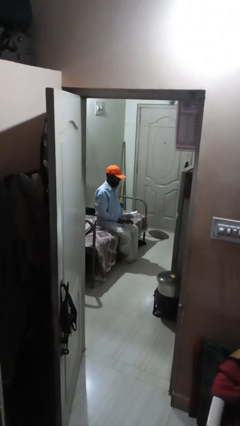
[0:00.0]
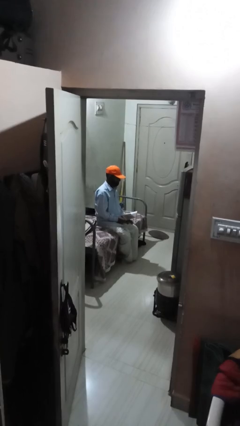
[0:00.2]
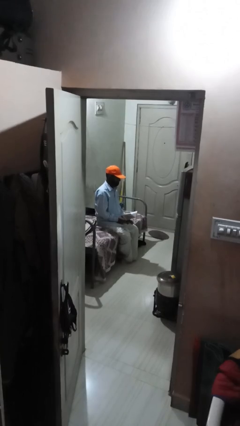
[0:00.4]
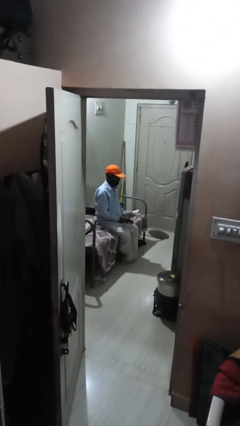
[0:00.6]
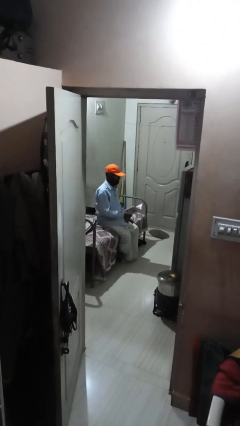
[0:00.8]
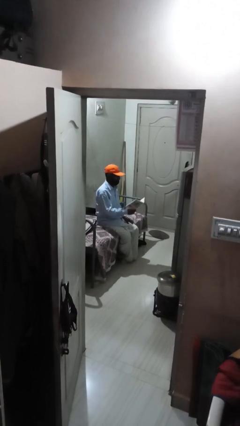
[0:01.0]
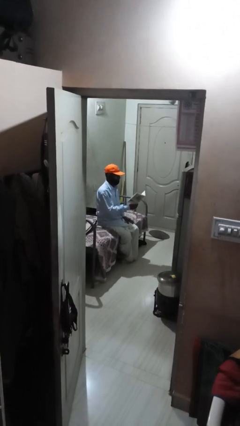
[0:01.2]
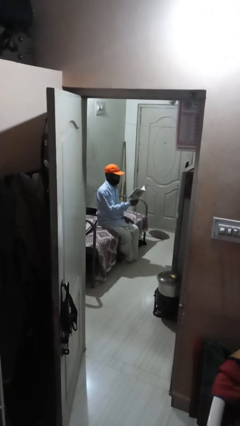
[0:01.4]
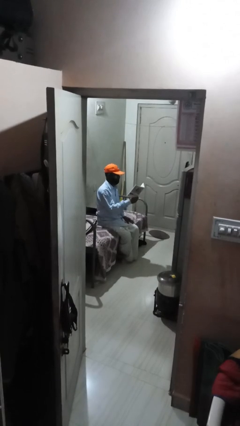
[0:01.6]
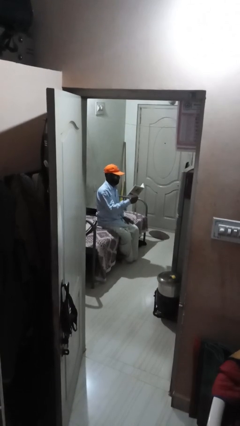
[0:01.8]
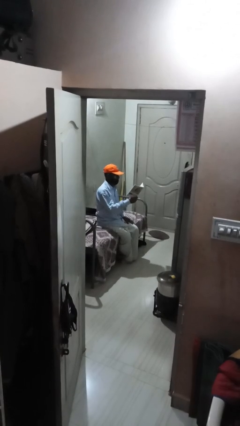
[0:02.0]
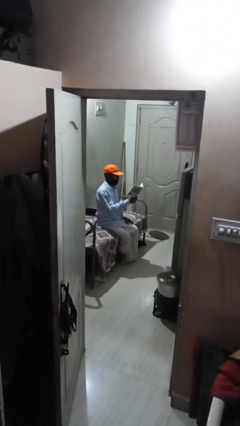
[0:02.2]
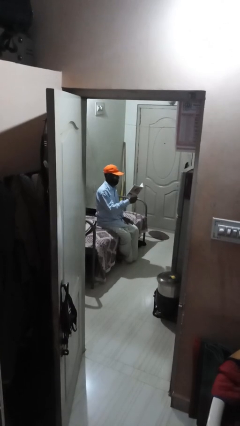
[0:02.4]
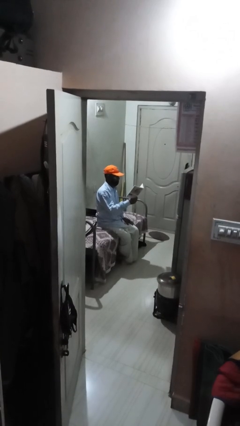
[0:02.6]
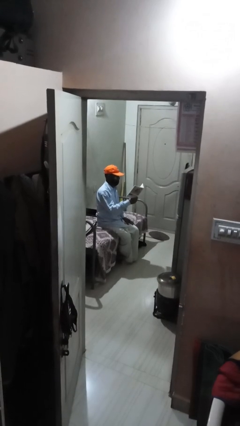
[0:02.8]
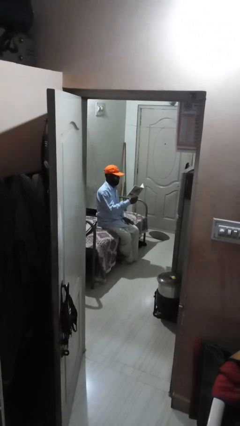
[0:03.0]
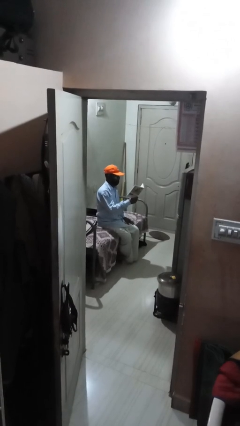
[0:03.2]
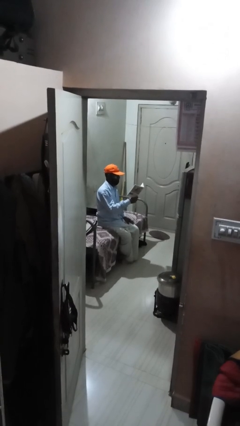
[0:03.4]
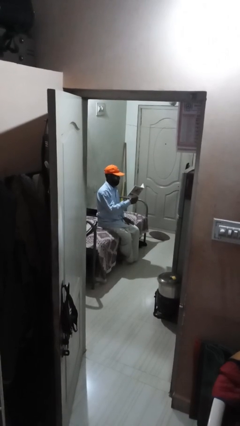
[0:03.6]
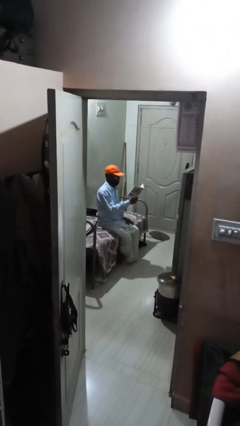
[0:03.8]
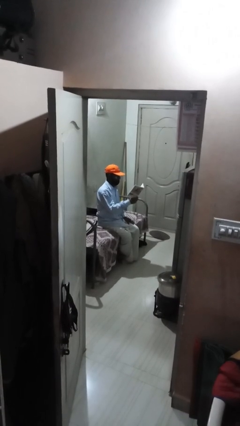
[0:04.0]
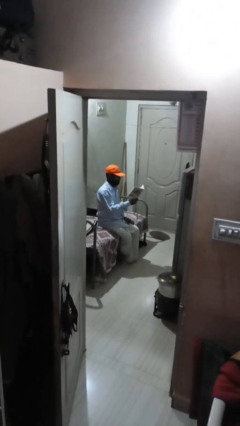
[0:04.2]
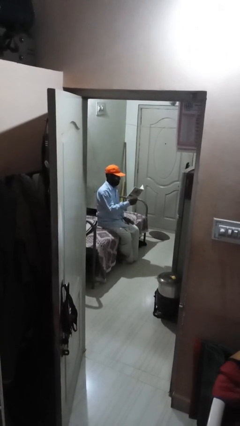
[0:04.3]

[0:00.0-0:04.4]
person reads document

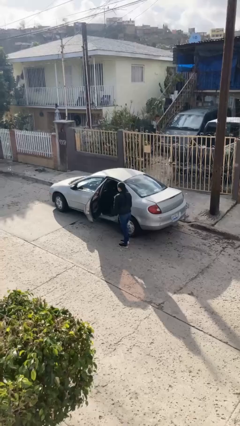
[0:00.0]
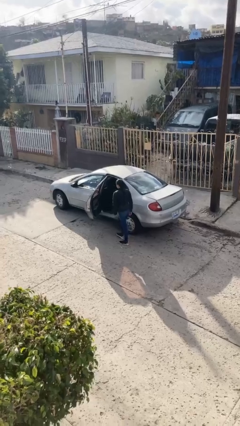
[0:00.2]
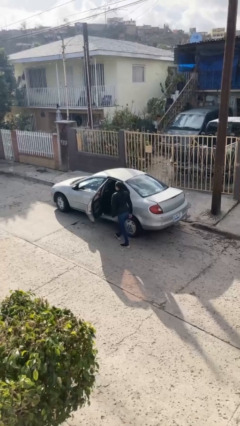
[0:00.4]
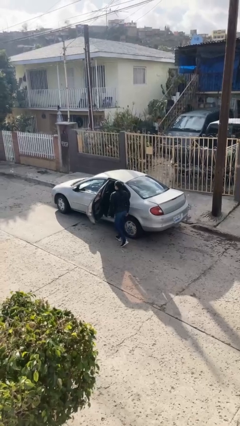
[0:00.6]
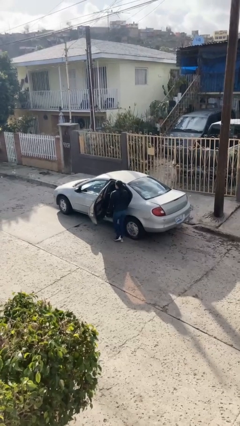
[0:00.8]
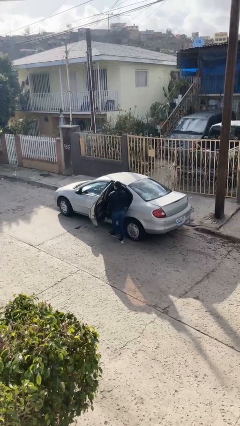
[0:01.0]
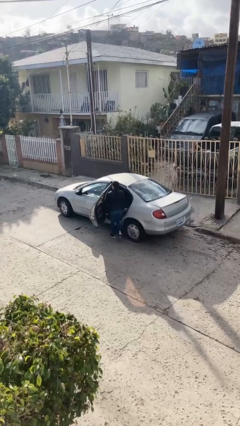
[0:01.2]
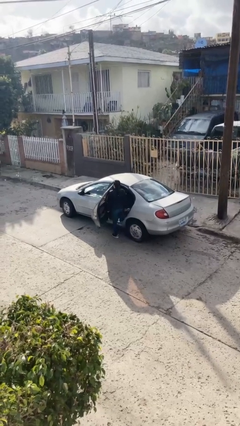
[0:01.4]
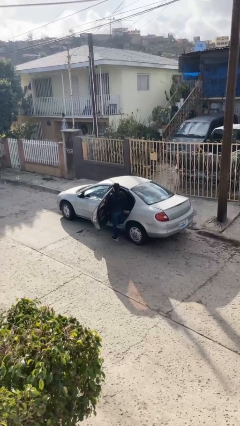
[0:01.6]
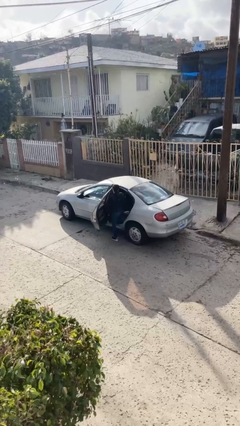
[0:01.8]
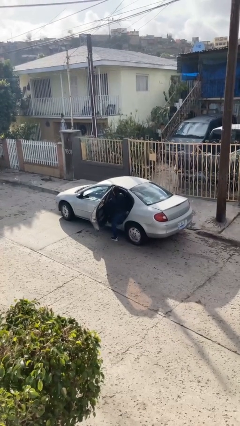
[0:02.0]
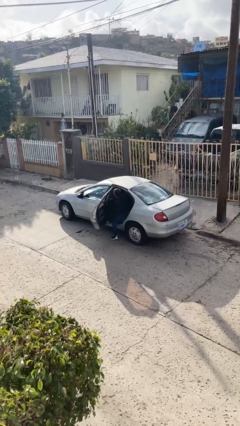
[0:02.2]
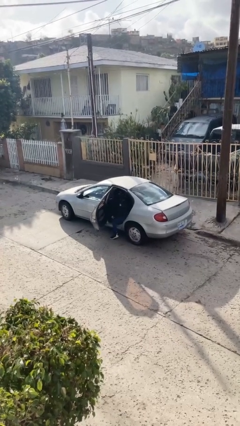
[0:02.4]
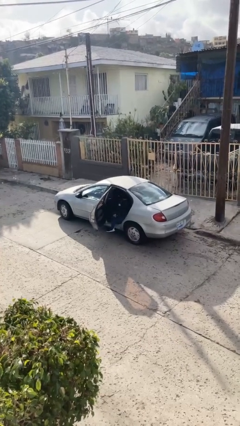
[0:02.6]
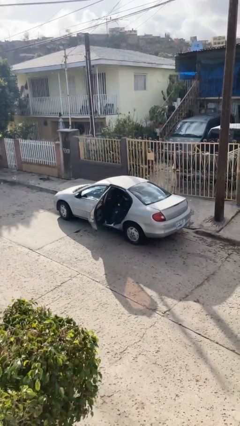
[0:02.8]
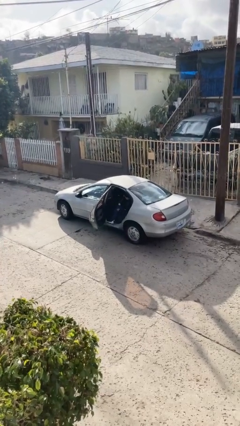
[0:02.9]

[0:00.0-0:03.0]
person enters car

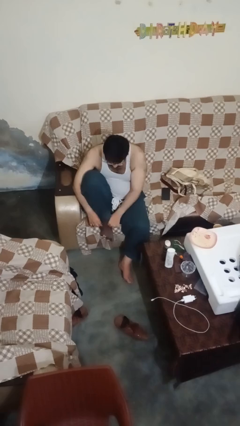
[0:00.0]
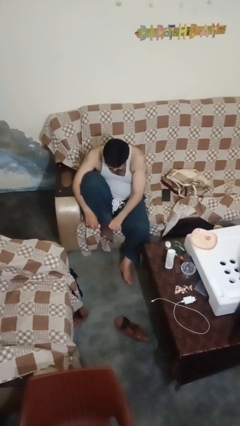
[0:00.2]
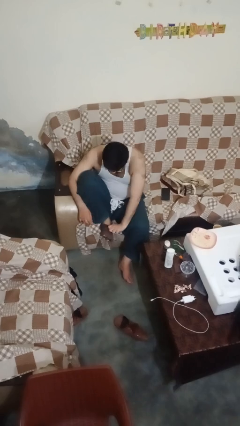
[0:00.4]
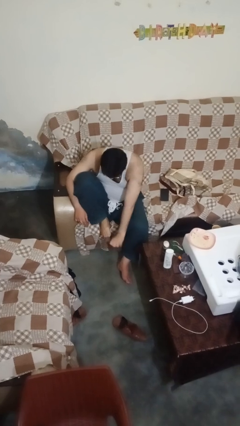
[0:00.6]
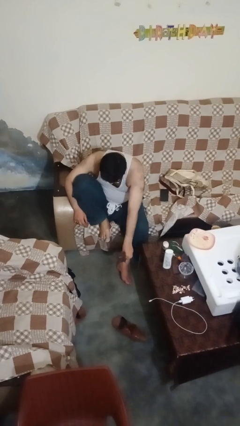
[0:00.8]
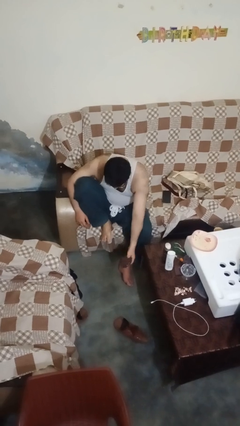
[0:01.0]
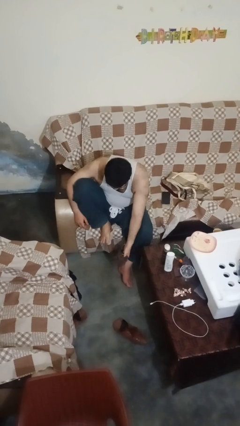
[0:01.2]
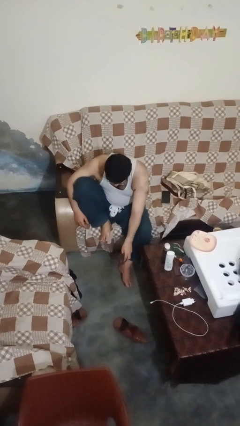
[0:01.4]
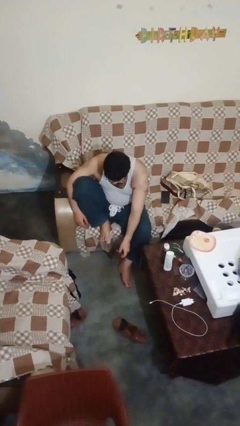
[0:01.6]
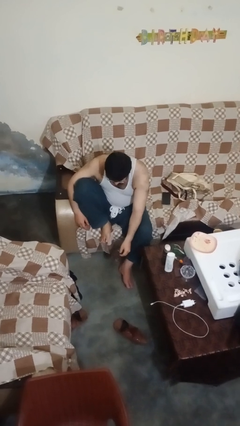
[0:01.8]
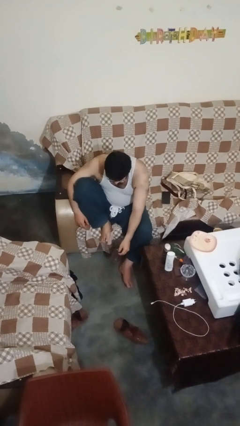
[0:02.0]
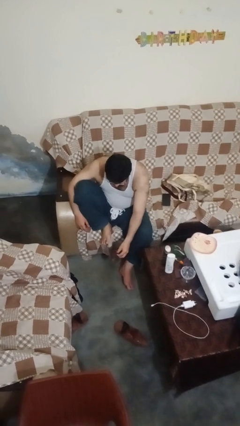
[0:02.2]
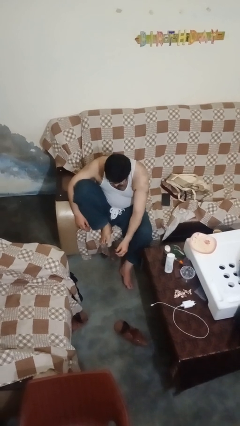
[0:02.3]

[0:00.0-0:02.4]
person takes off socks

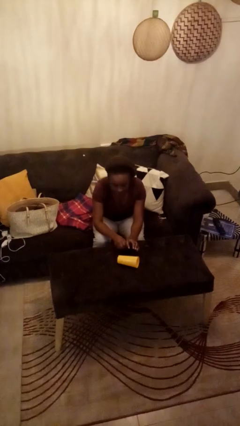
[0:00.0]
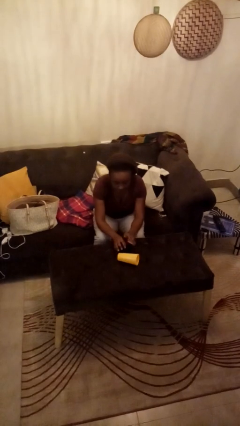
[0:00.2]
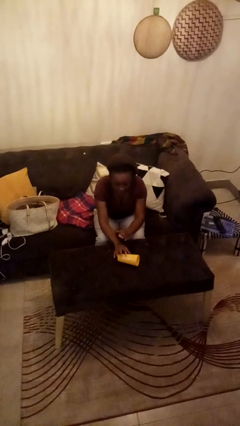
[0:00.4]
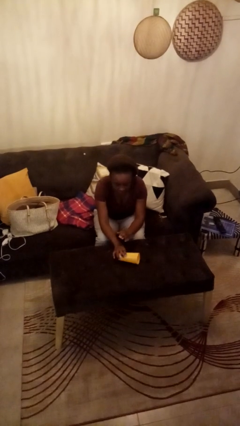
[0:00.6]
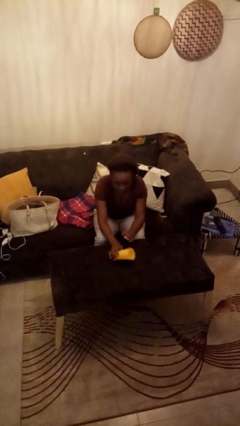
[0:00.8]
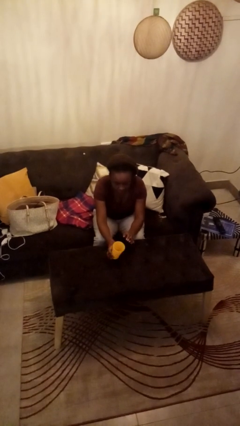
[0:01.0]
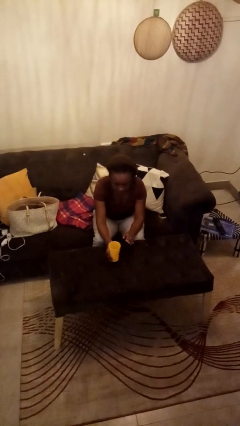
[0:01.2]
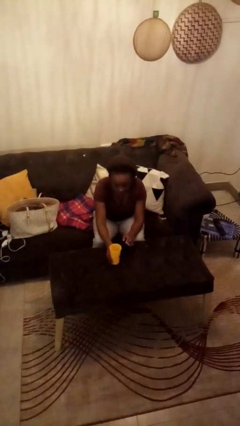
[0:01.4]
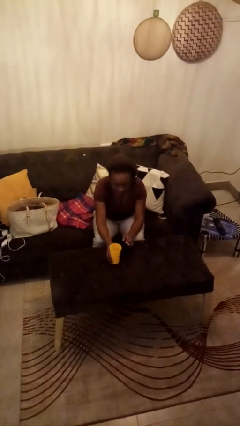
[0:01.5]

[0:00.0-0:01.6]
person sets upright glass

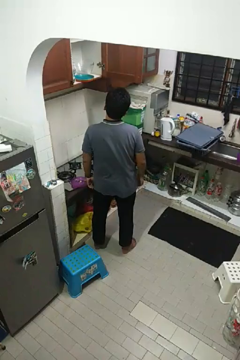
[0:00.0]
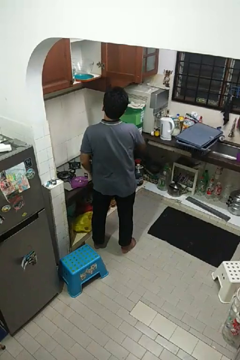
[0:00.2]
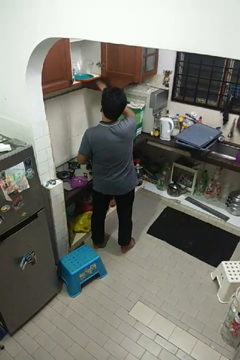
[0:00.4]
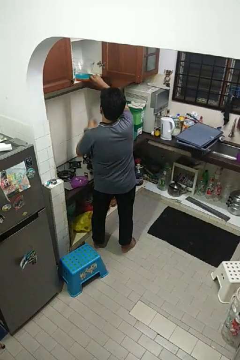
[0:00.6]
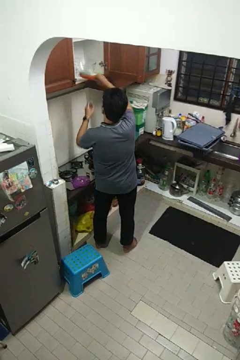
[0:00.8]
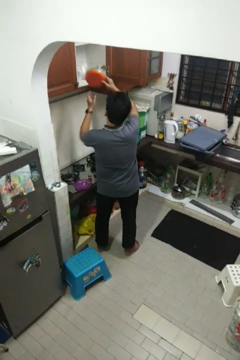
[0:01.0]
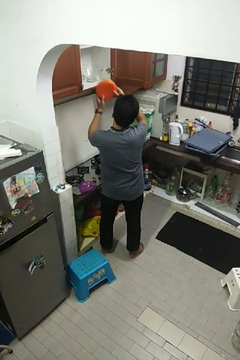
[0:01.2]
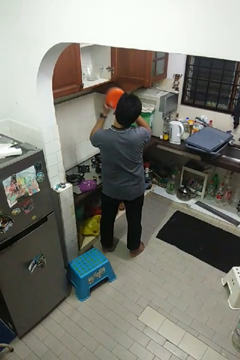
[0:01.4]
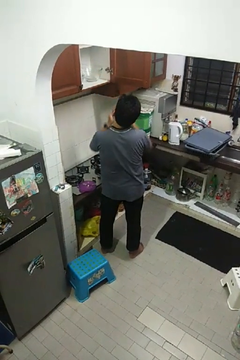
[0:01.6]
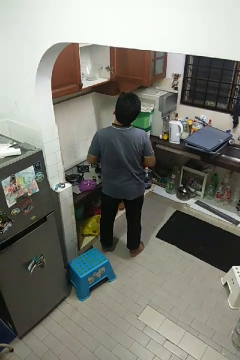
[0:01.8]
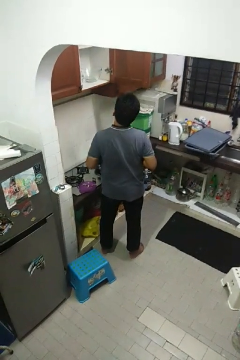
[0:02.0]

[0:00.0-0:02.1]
person takes object from cabinet

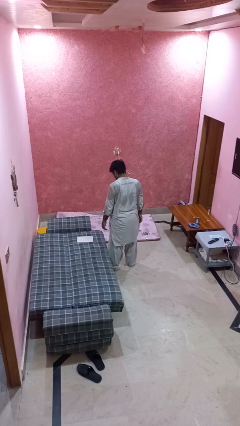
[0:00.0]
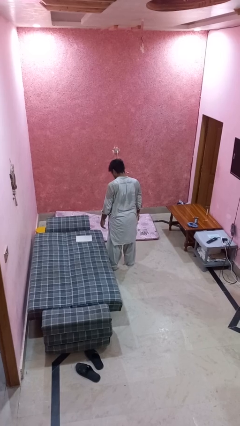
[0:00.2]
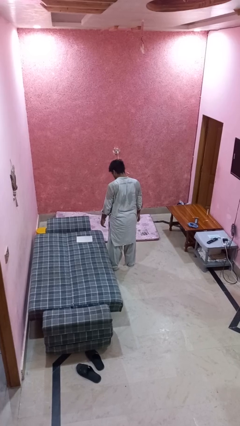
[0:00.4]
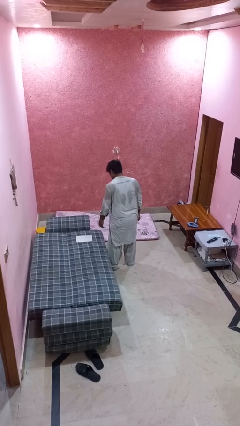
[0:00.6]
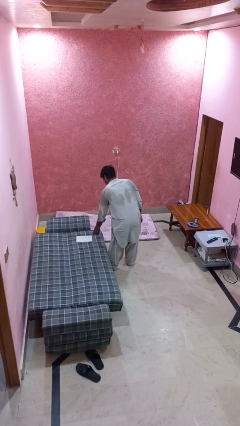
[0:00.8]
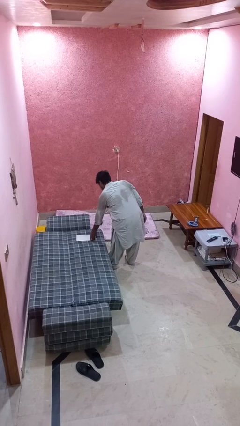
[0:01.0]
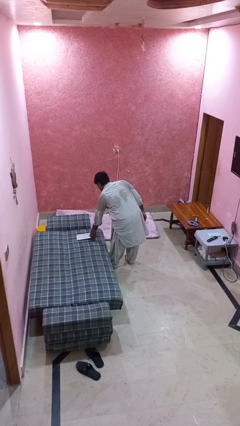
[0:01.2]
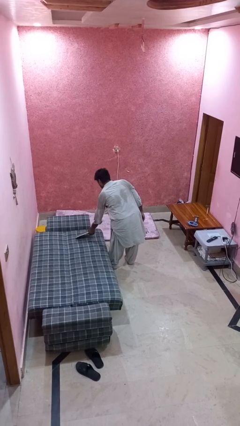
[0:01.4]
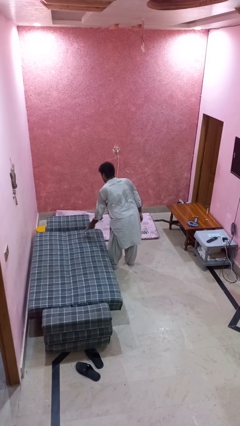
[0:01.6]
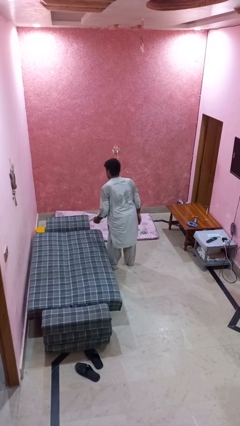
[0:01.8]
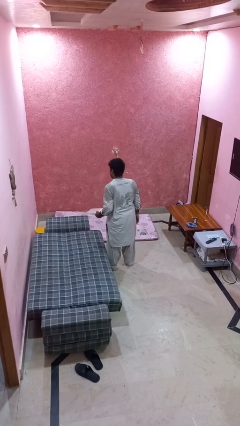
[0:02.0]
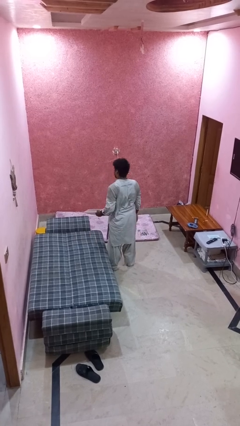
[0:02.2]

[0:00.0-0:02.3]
person picks up object from bed

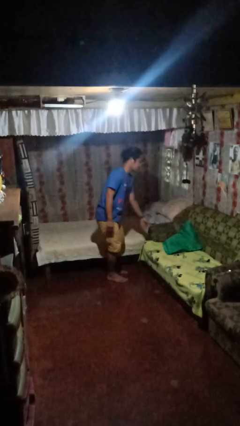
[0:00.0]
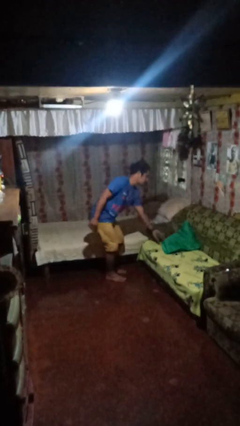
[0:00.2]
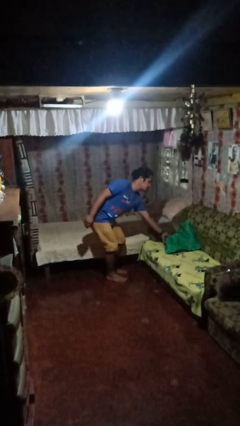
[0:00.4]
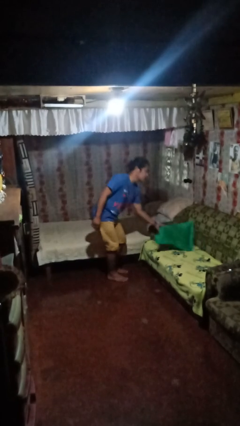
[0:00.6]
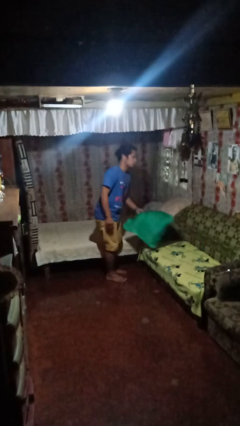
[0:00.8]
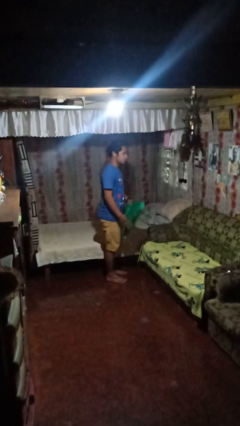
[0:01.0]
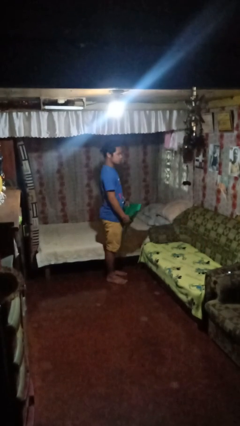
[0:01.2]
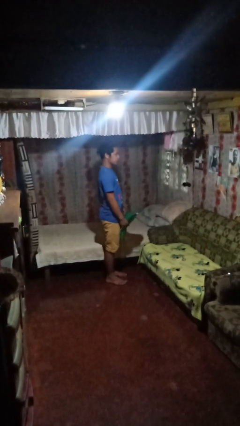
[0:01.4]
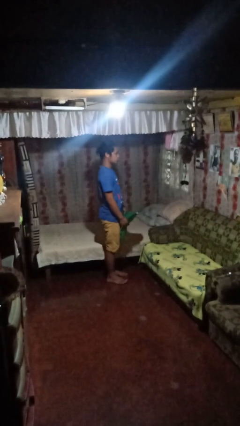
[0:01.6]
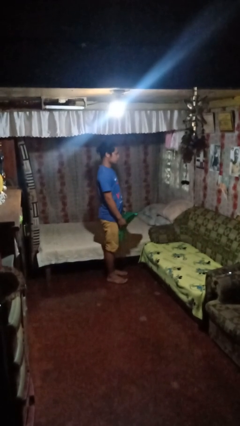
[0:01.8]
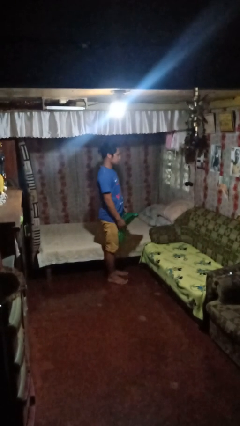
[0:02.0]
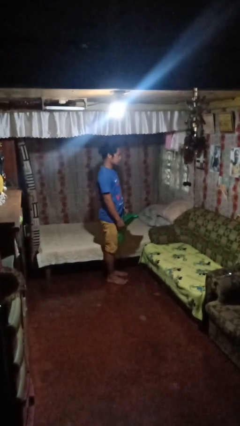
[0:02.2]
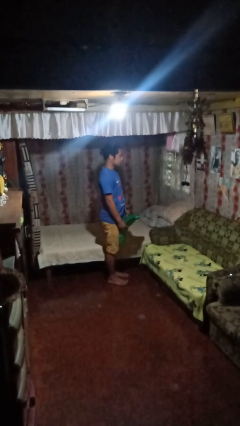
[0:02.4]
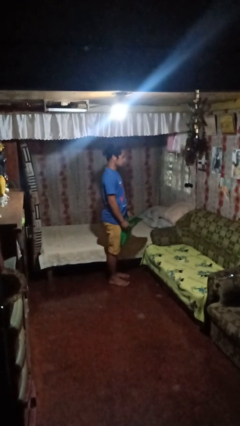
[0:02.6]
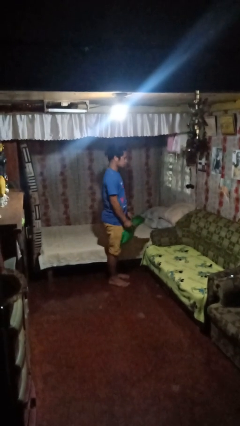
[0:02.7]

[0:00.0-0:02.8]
person picks up object from couch
